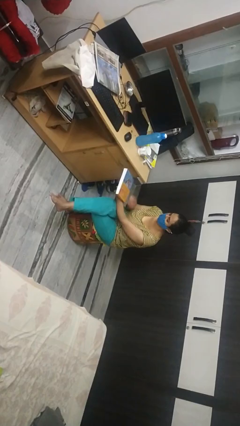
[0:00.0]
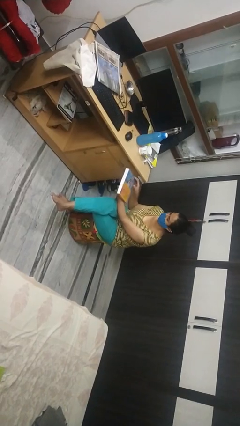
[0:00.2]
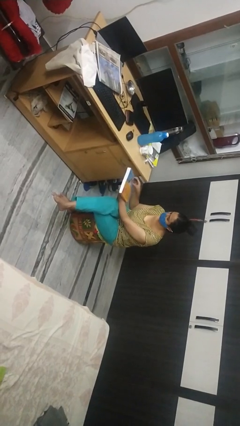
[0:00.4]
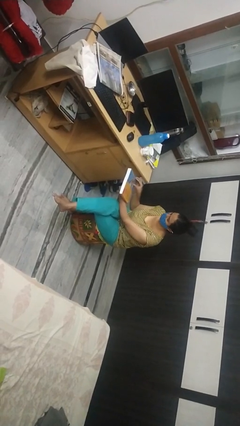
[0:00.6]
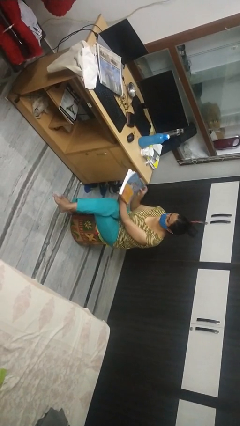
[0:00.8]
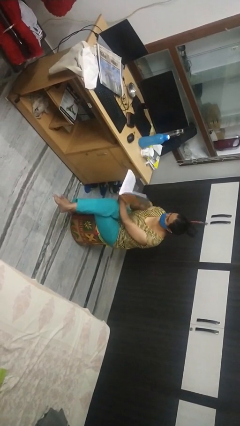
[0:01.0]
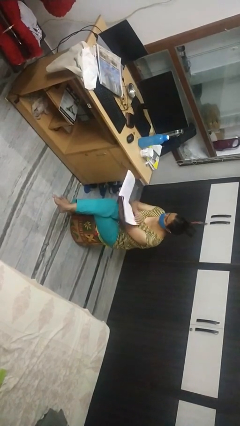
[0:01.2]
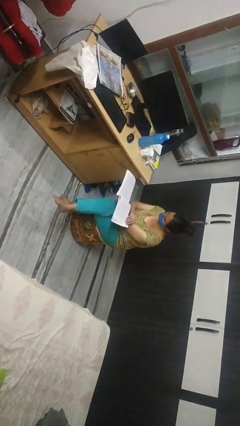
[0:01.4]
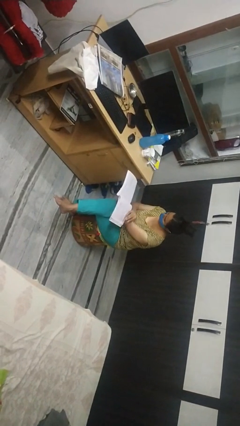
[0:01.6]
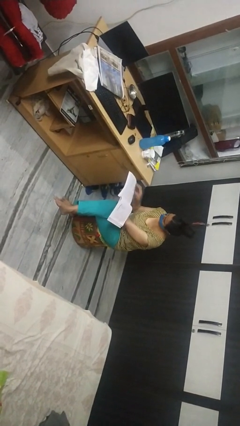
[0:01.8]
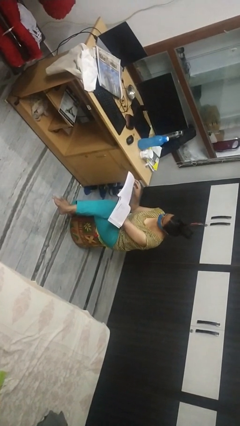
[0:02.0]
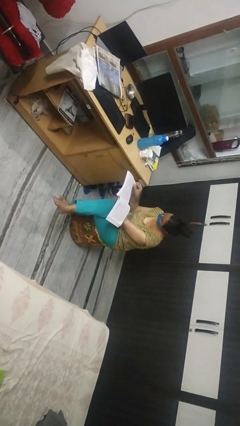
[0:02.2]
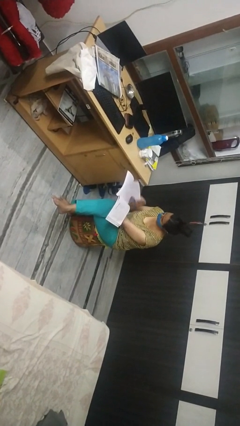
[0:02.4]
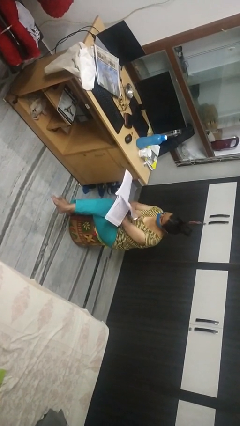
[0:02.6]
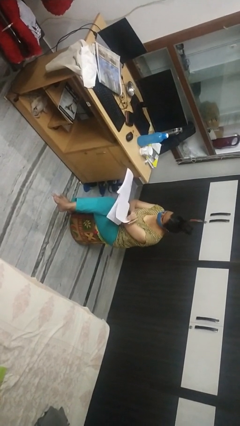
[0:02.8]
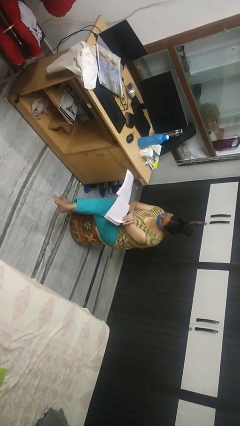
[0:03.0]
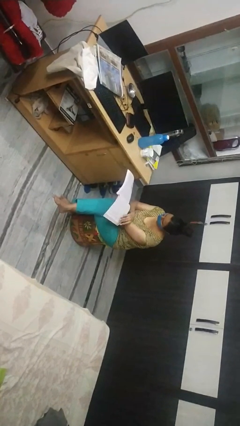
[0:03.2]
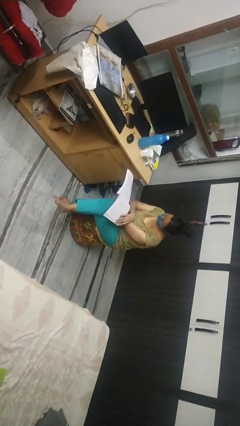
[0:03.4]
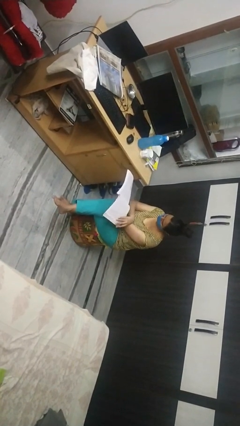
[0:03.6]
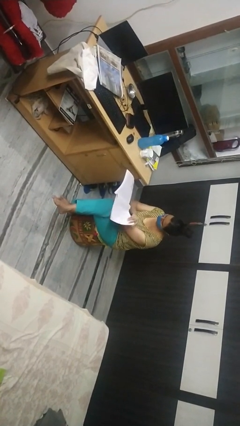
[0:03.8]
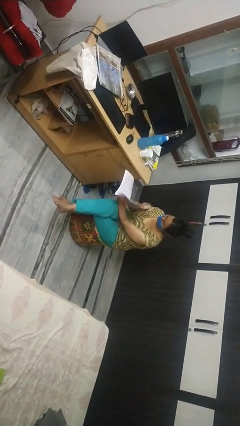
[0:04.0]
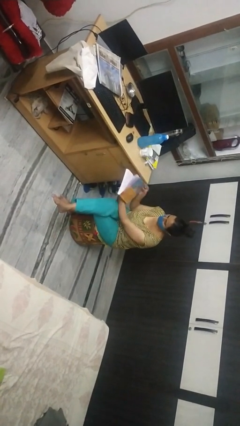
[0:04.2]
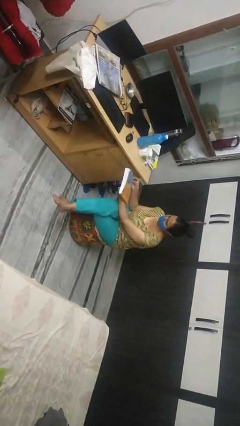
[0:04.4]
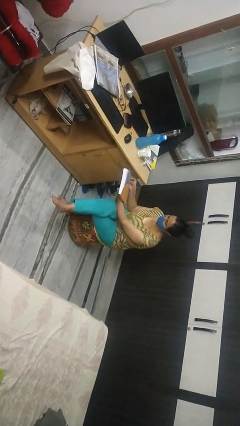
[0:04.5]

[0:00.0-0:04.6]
person reads book

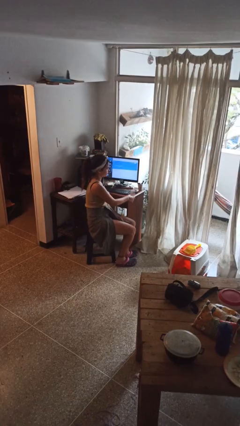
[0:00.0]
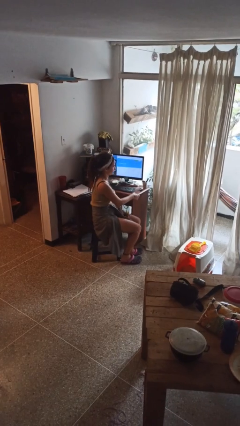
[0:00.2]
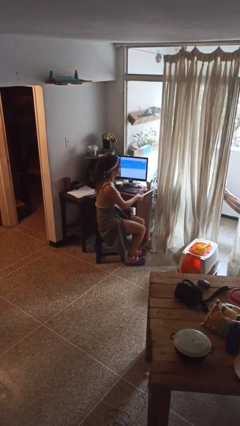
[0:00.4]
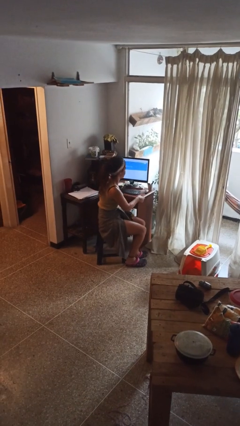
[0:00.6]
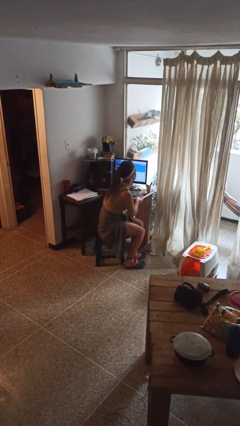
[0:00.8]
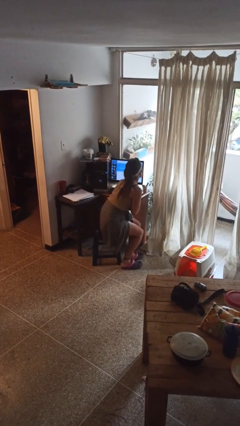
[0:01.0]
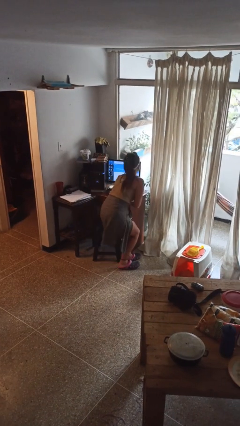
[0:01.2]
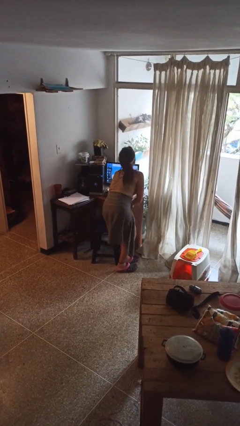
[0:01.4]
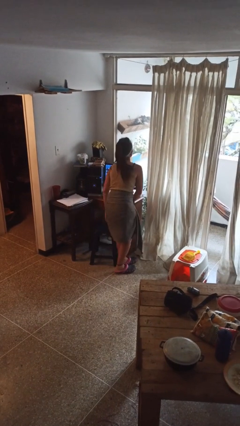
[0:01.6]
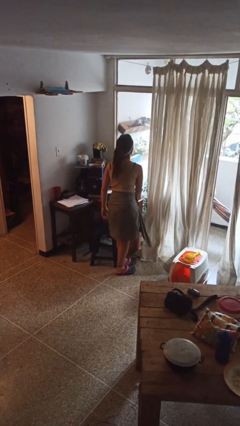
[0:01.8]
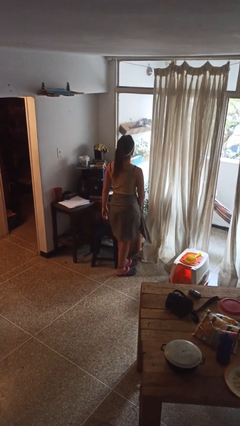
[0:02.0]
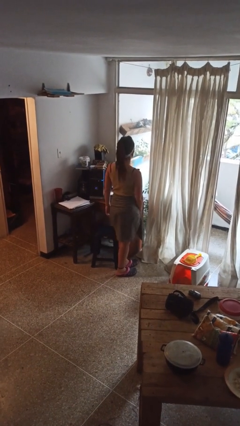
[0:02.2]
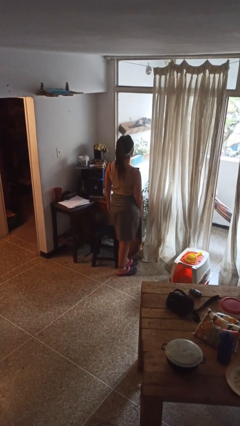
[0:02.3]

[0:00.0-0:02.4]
person stands up

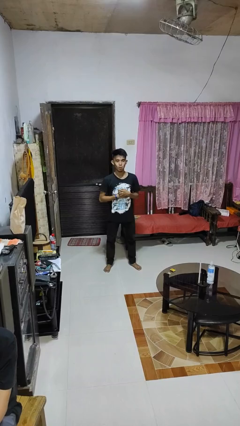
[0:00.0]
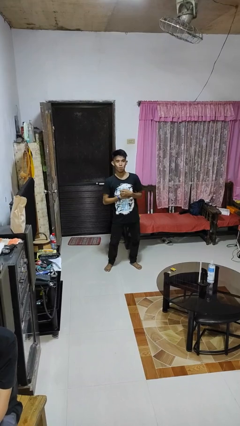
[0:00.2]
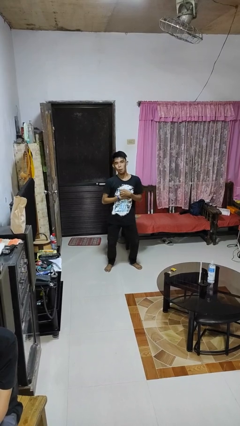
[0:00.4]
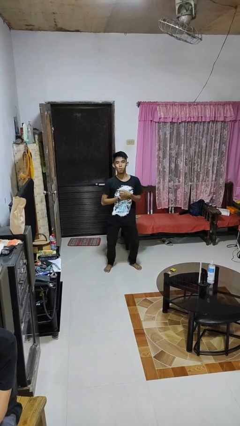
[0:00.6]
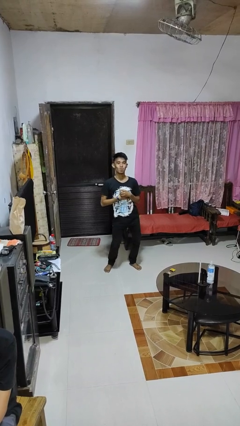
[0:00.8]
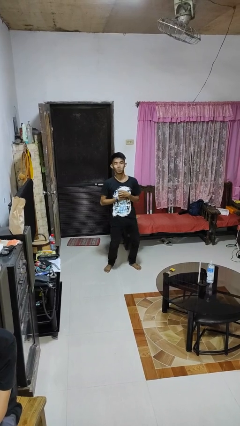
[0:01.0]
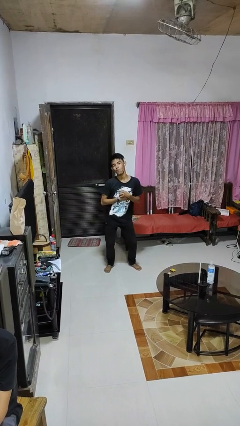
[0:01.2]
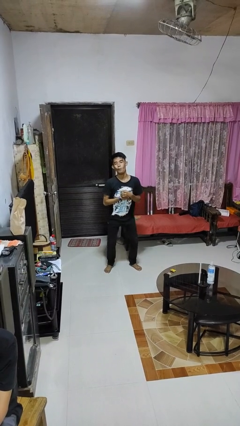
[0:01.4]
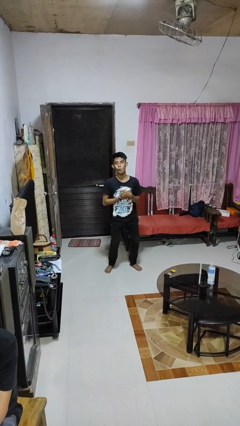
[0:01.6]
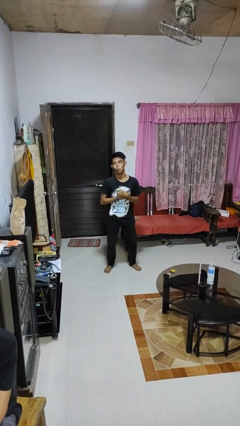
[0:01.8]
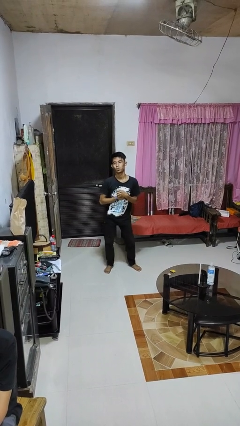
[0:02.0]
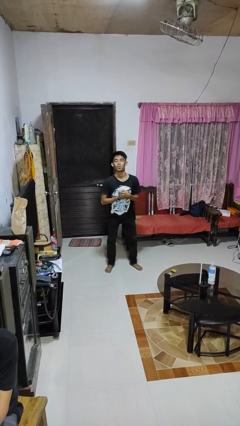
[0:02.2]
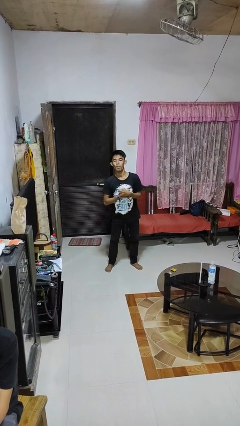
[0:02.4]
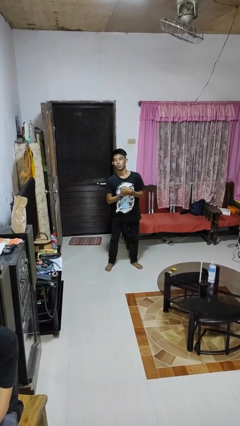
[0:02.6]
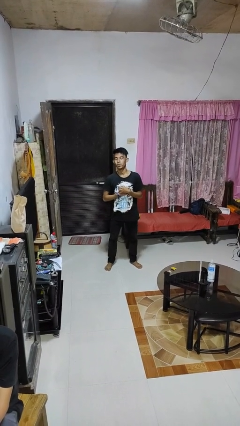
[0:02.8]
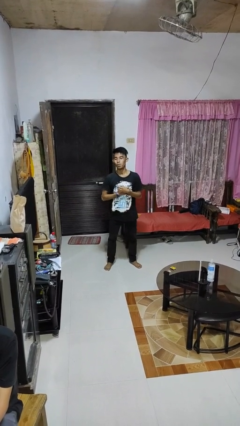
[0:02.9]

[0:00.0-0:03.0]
person wiggles hips

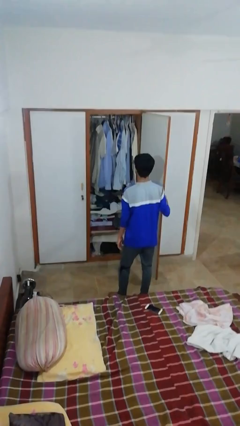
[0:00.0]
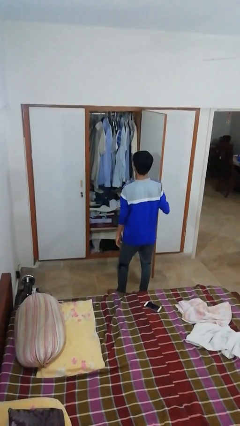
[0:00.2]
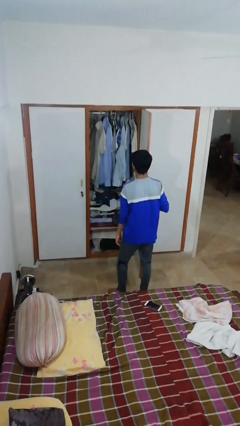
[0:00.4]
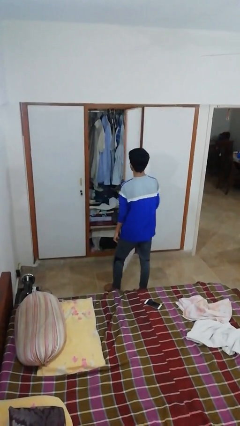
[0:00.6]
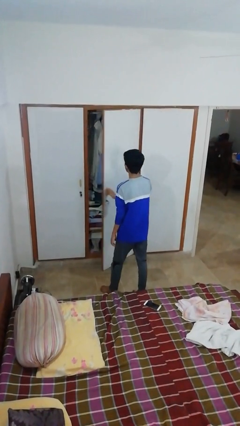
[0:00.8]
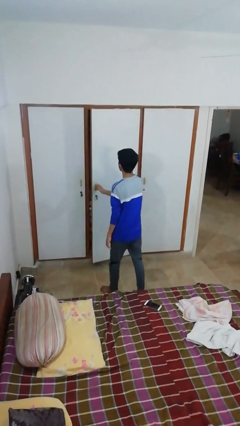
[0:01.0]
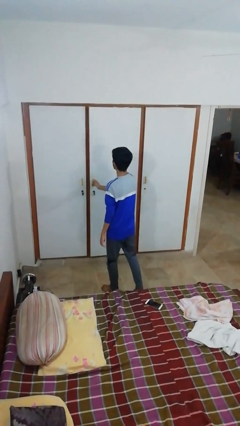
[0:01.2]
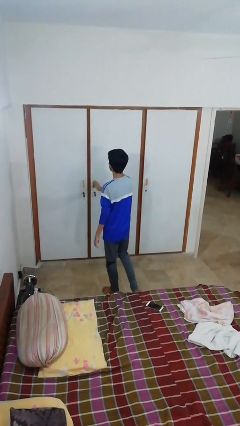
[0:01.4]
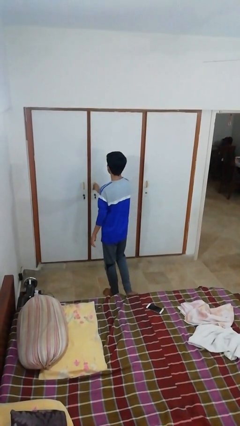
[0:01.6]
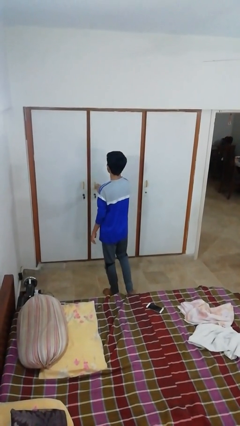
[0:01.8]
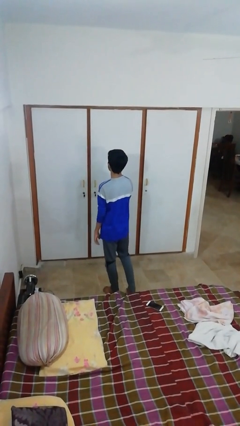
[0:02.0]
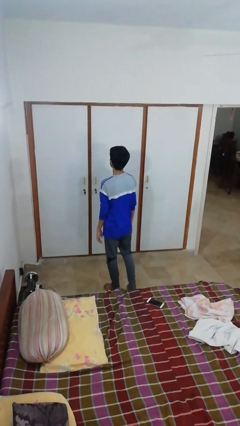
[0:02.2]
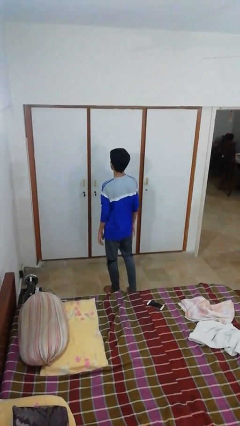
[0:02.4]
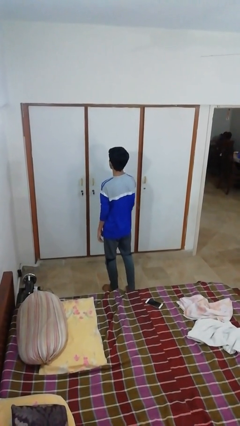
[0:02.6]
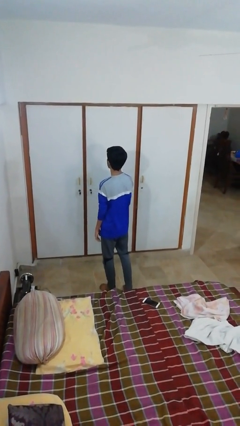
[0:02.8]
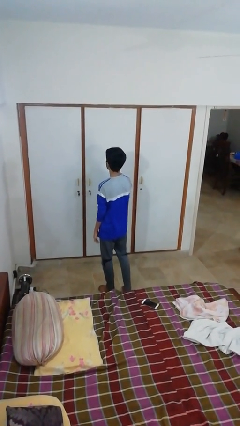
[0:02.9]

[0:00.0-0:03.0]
person closes closet door

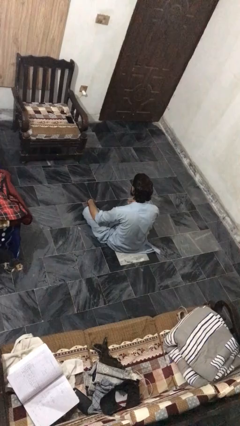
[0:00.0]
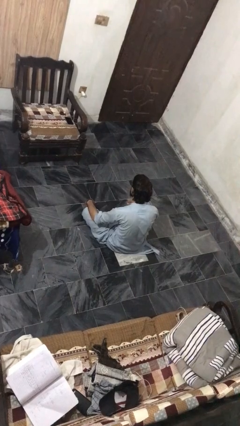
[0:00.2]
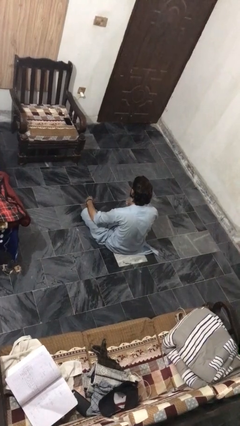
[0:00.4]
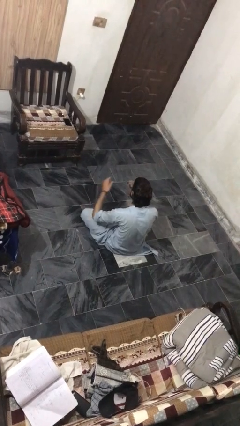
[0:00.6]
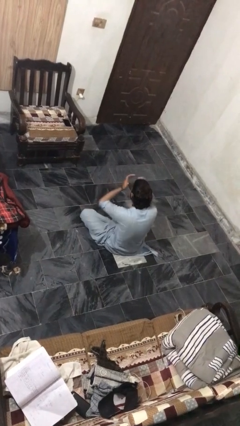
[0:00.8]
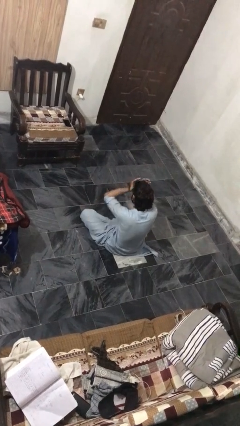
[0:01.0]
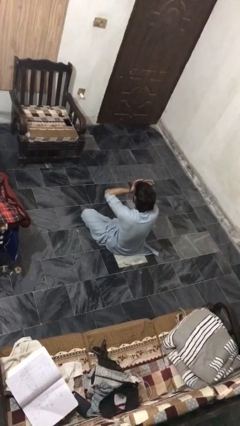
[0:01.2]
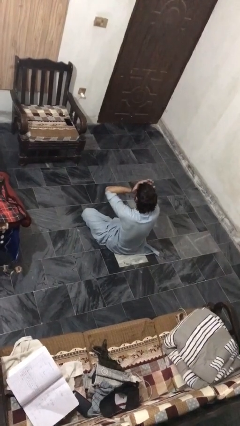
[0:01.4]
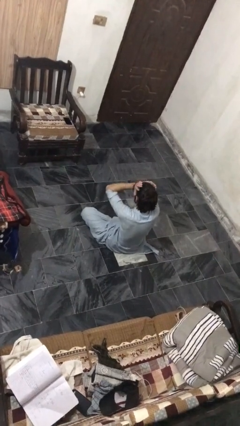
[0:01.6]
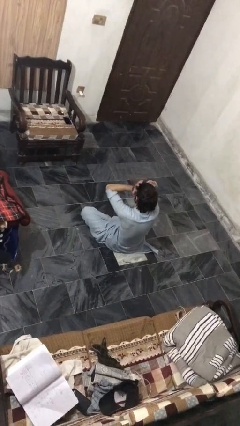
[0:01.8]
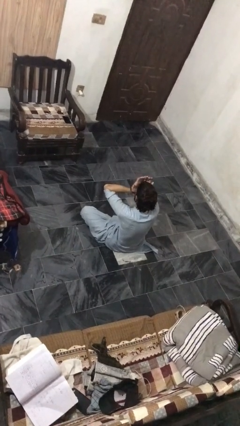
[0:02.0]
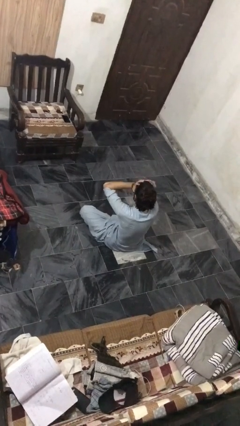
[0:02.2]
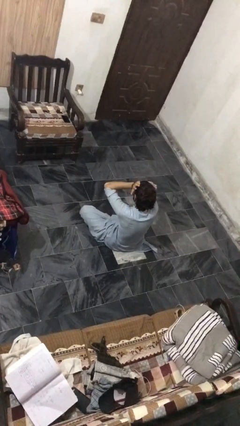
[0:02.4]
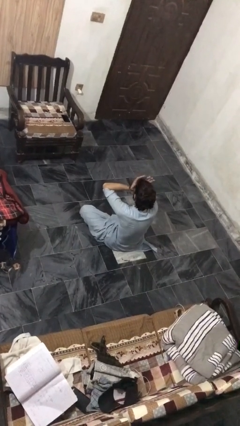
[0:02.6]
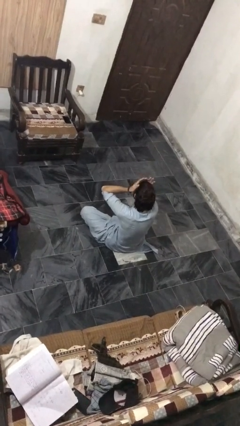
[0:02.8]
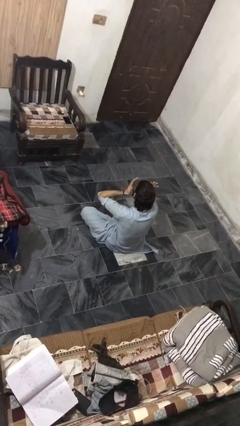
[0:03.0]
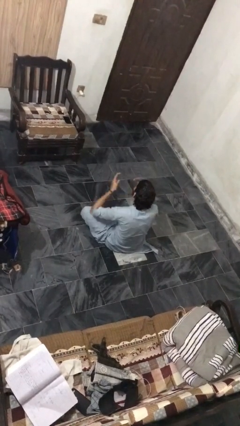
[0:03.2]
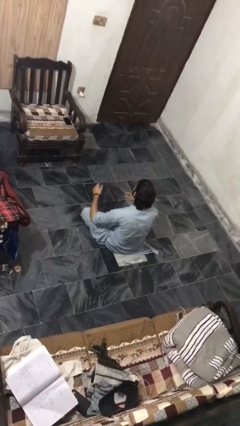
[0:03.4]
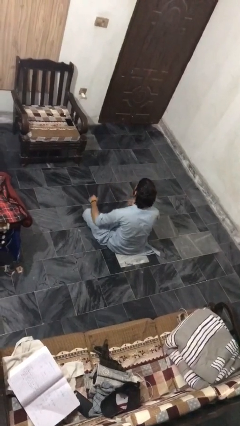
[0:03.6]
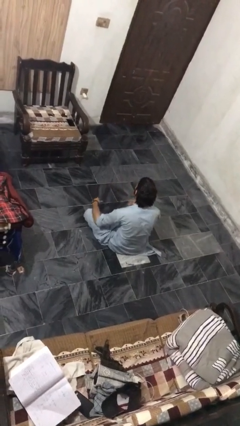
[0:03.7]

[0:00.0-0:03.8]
person rubs eyes

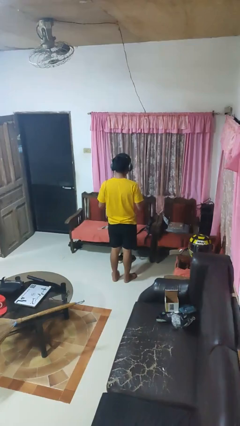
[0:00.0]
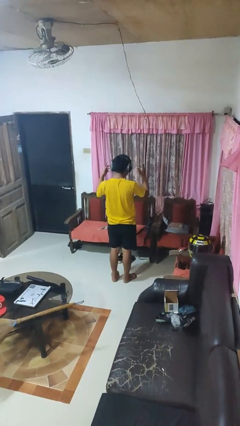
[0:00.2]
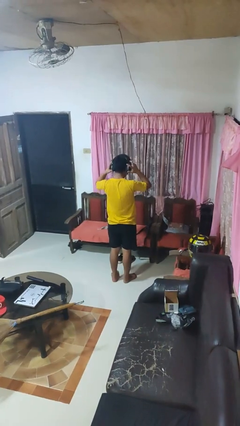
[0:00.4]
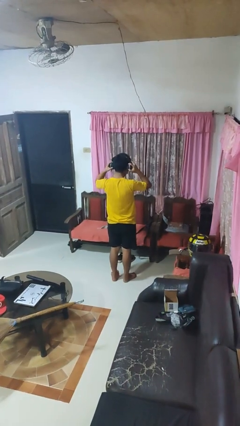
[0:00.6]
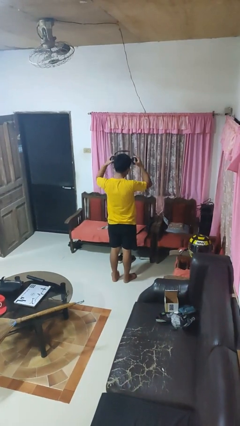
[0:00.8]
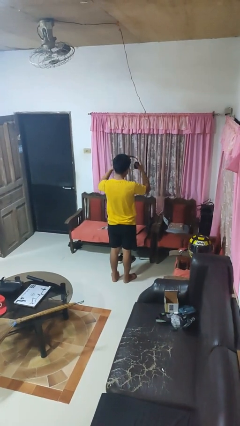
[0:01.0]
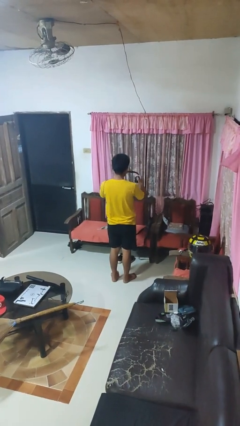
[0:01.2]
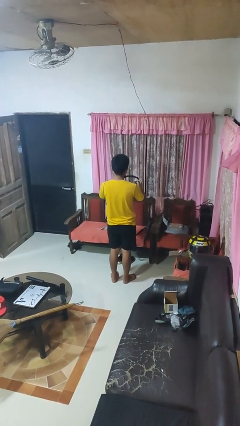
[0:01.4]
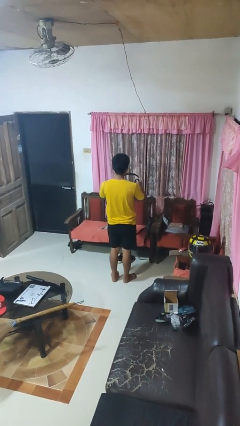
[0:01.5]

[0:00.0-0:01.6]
person takes off headphones
